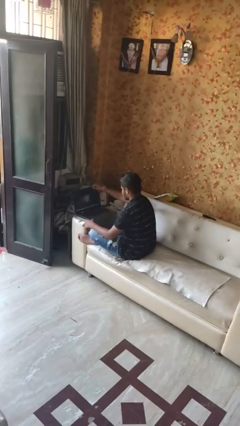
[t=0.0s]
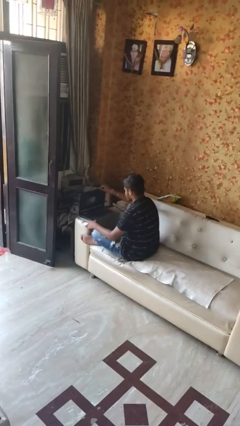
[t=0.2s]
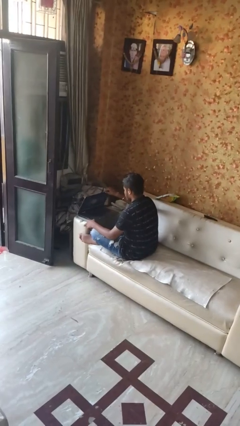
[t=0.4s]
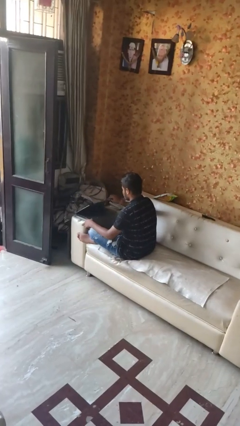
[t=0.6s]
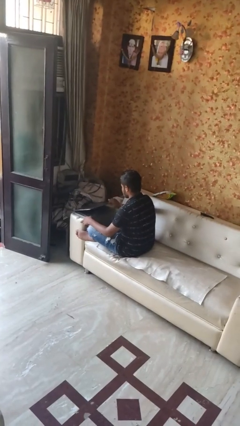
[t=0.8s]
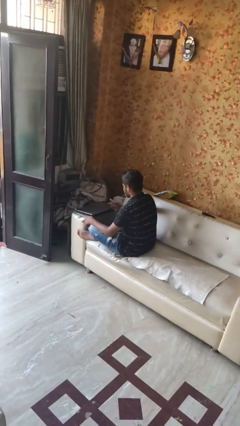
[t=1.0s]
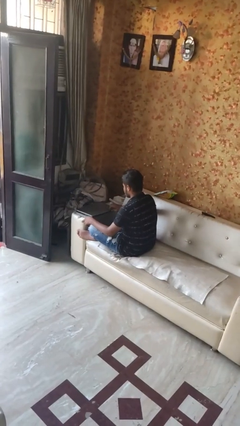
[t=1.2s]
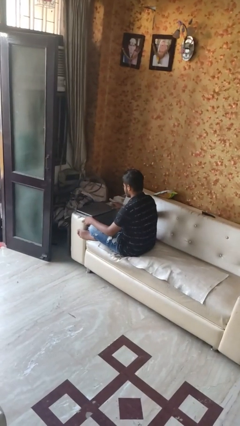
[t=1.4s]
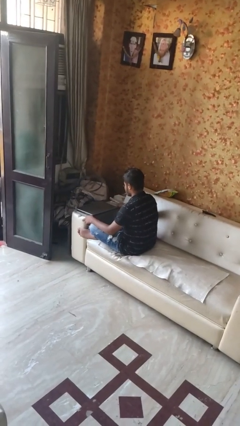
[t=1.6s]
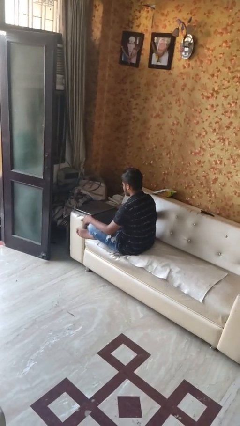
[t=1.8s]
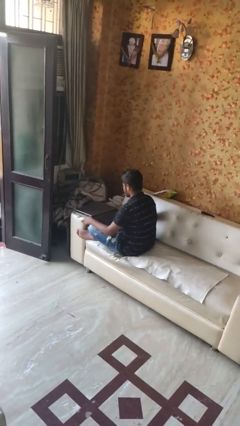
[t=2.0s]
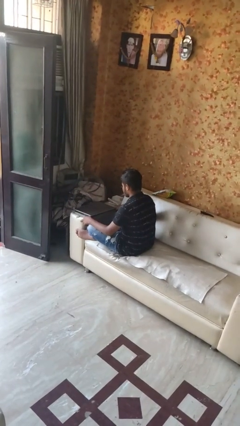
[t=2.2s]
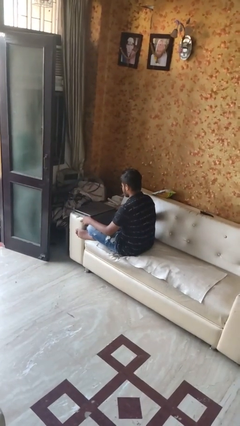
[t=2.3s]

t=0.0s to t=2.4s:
person closes laptop

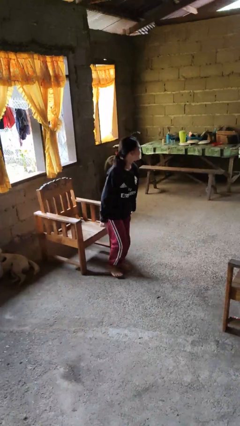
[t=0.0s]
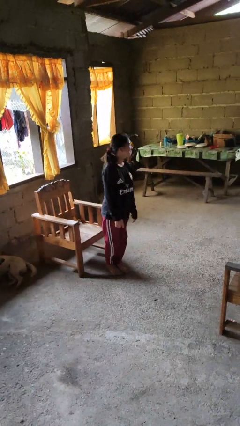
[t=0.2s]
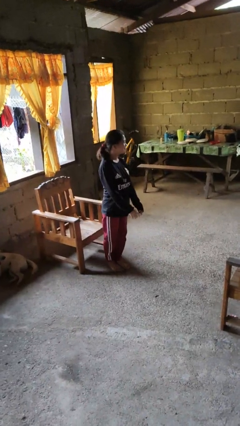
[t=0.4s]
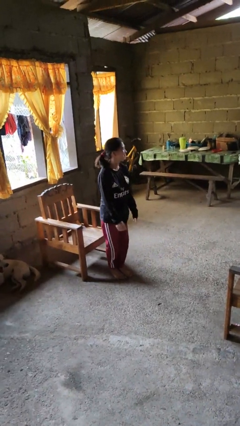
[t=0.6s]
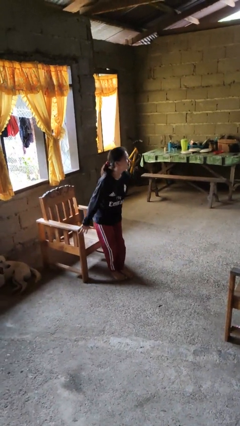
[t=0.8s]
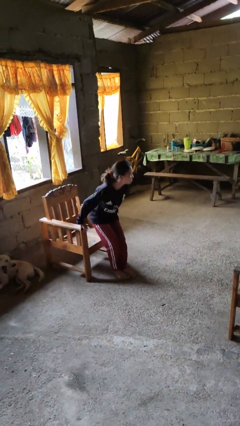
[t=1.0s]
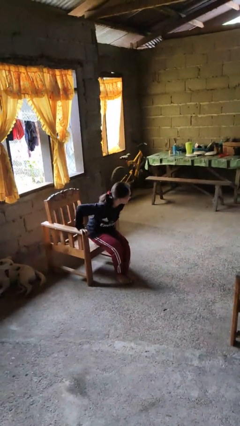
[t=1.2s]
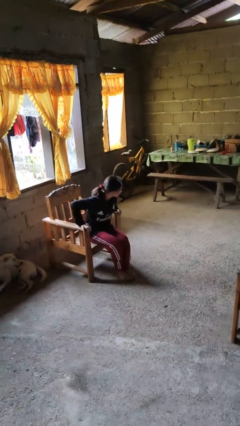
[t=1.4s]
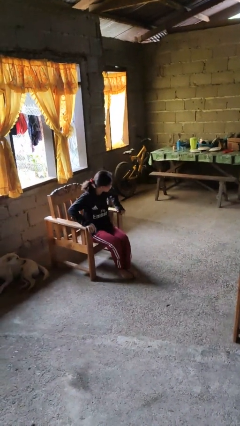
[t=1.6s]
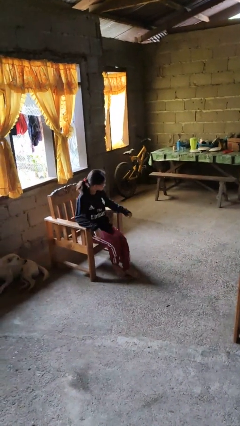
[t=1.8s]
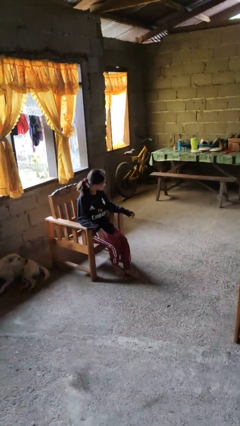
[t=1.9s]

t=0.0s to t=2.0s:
person sits down

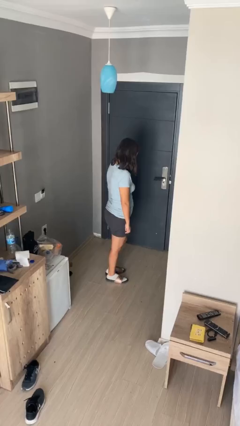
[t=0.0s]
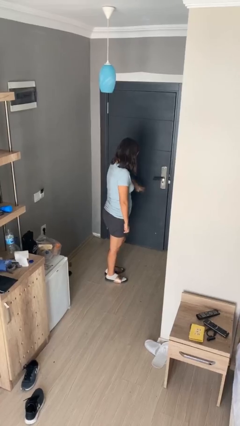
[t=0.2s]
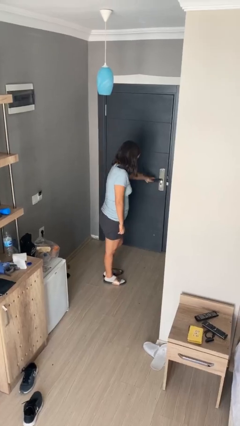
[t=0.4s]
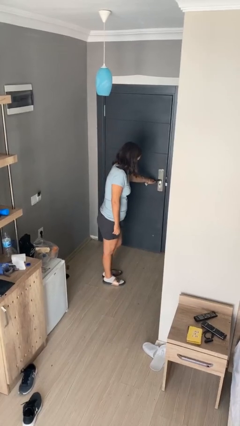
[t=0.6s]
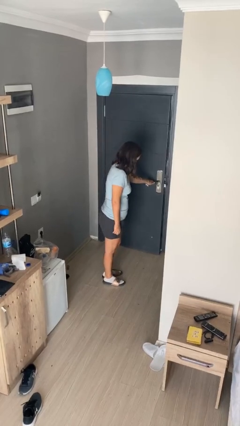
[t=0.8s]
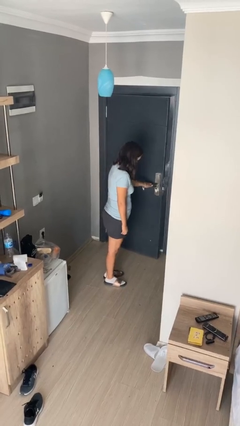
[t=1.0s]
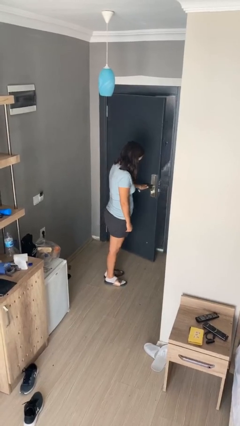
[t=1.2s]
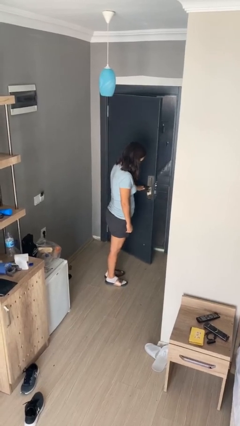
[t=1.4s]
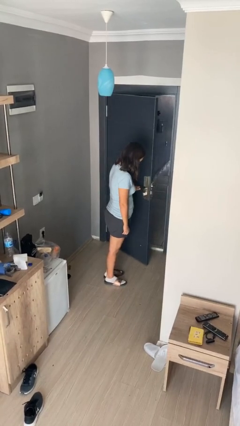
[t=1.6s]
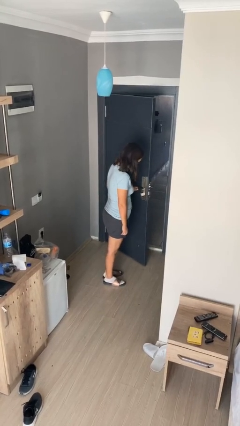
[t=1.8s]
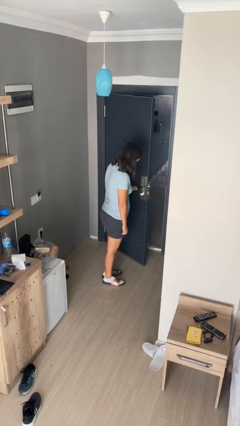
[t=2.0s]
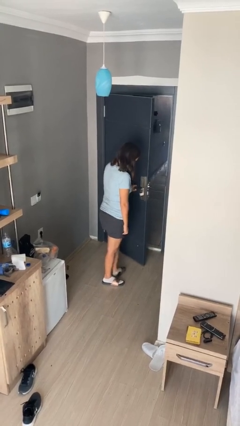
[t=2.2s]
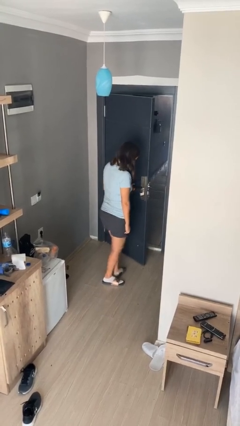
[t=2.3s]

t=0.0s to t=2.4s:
person opens facility door

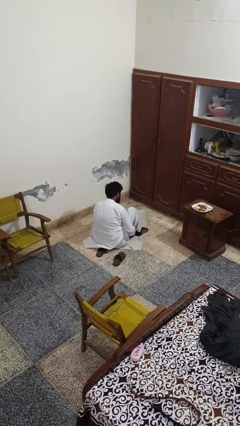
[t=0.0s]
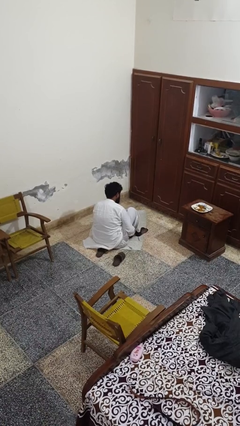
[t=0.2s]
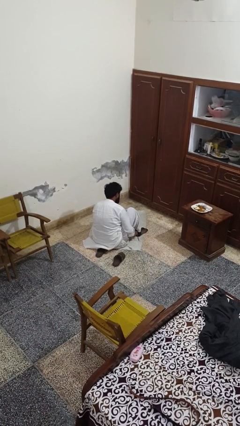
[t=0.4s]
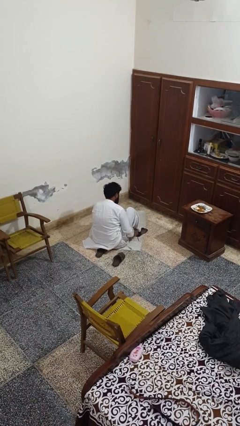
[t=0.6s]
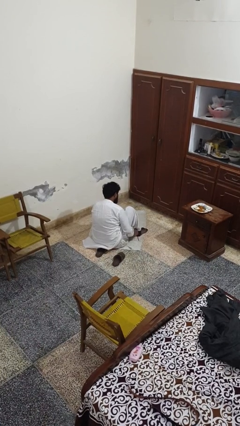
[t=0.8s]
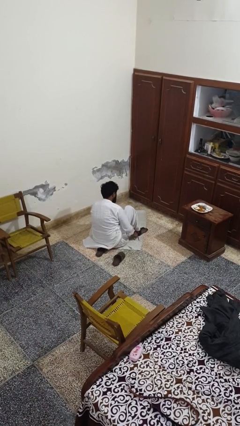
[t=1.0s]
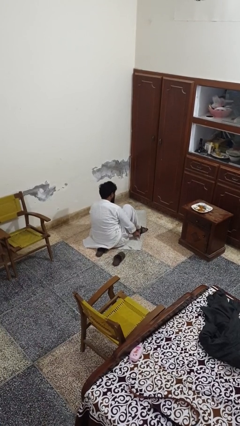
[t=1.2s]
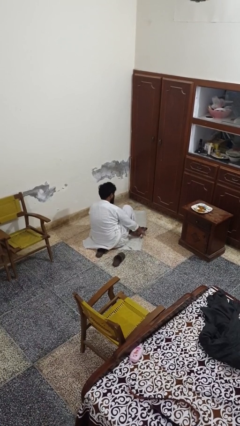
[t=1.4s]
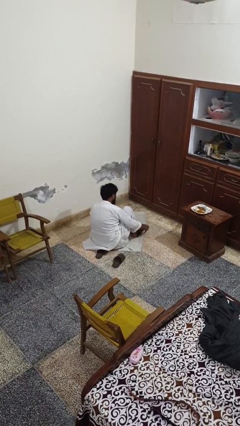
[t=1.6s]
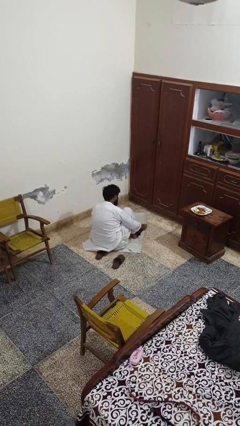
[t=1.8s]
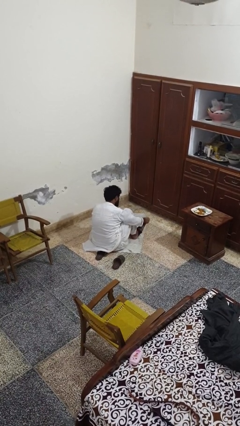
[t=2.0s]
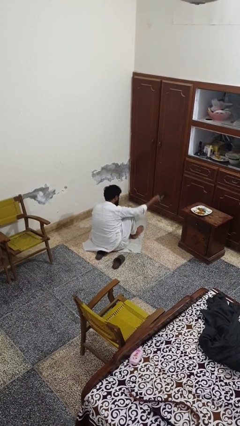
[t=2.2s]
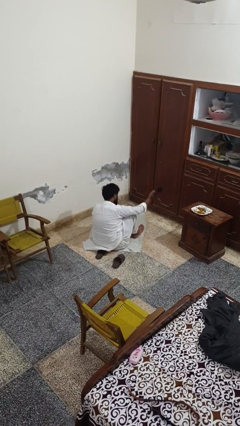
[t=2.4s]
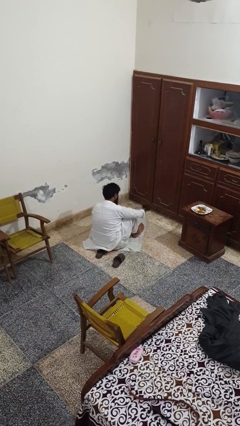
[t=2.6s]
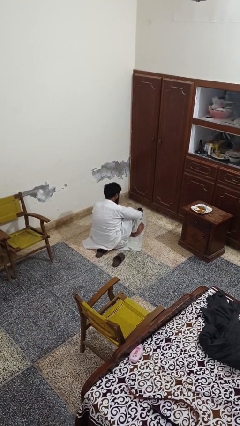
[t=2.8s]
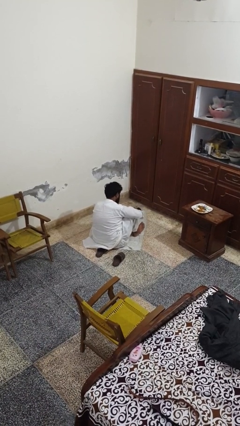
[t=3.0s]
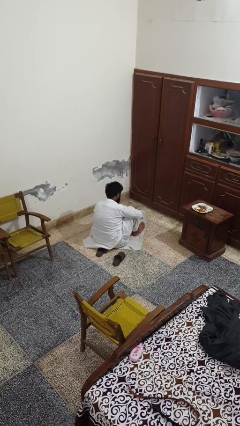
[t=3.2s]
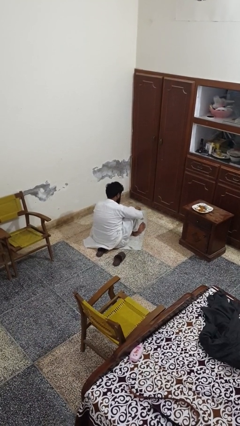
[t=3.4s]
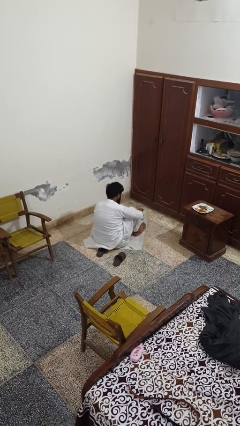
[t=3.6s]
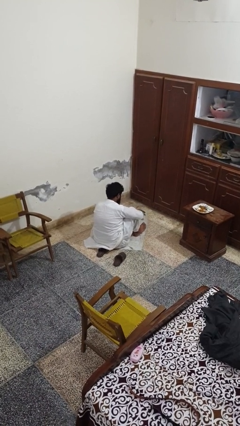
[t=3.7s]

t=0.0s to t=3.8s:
person takes off socks

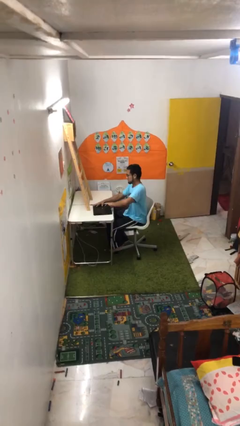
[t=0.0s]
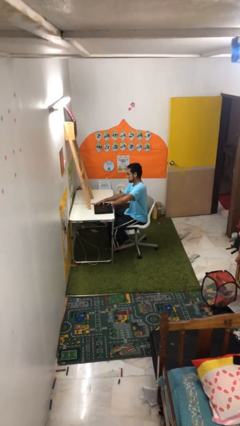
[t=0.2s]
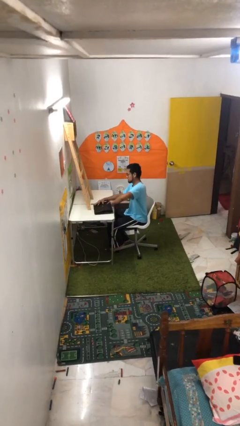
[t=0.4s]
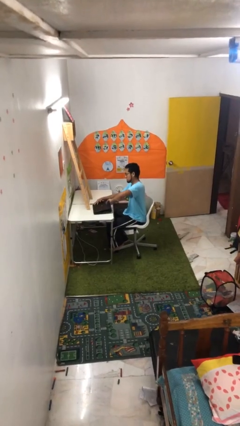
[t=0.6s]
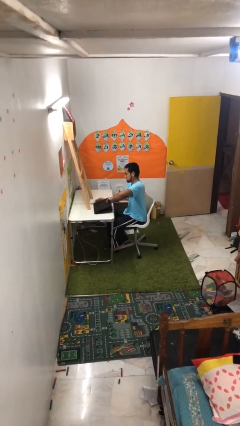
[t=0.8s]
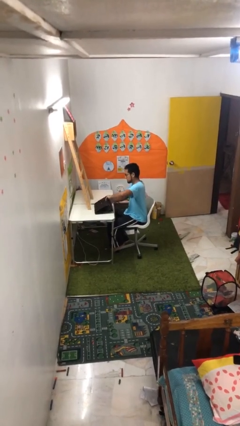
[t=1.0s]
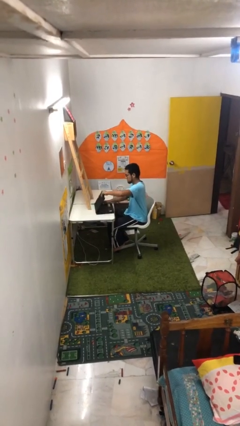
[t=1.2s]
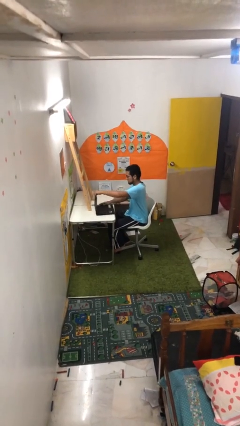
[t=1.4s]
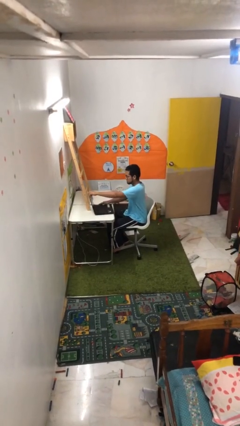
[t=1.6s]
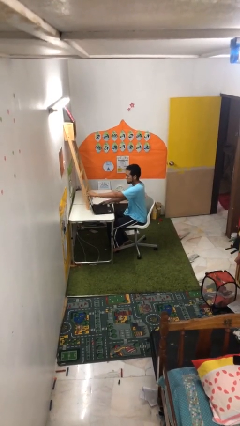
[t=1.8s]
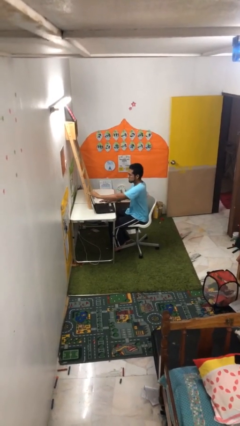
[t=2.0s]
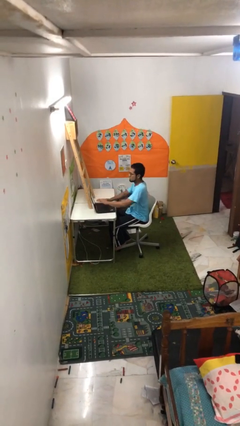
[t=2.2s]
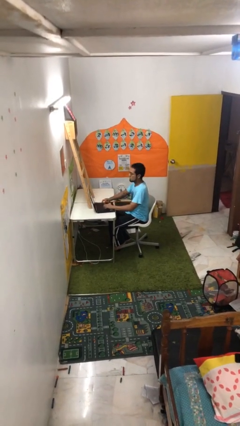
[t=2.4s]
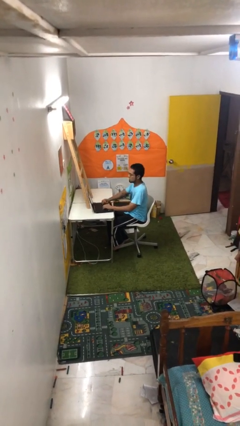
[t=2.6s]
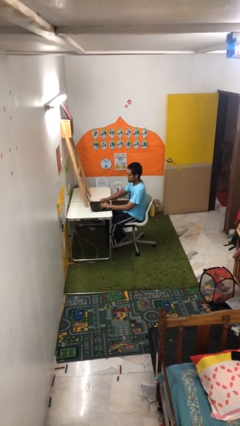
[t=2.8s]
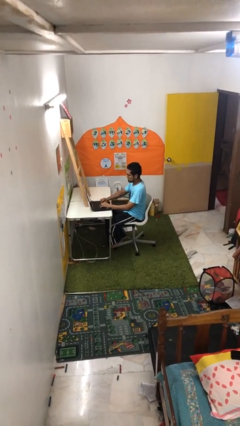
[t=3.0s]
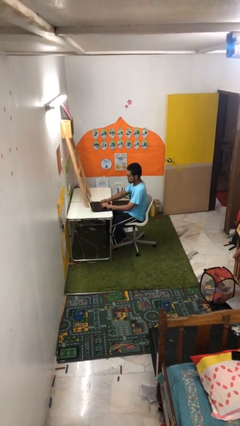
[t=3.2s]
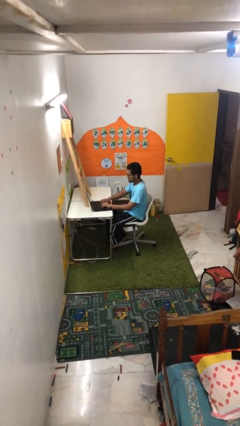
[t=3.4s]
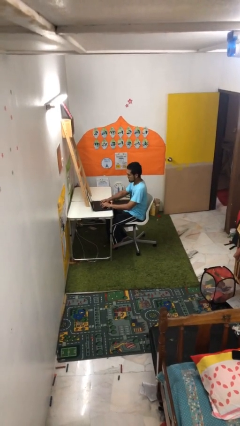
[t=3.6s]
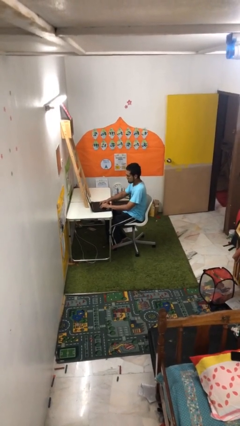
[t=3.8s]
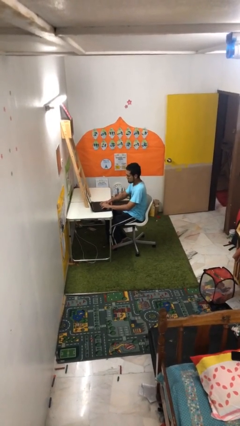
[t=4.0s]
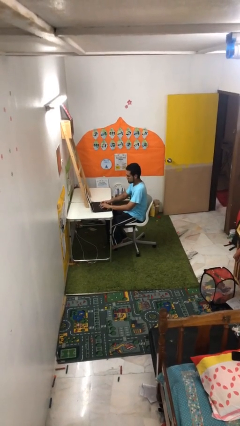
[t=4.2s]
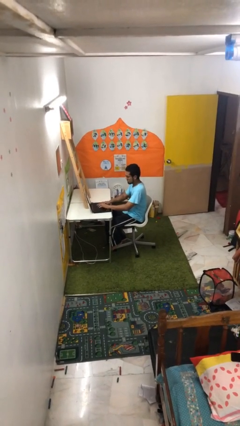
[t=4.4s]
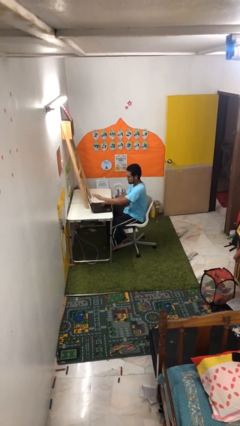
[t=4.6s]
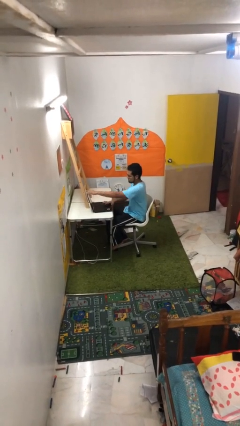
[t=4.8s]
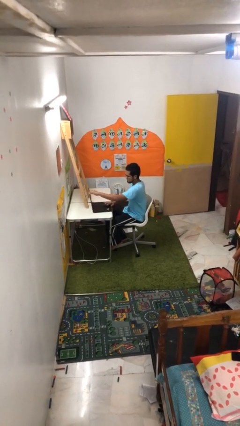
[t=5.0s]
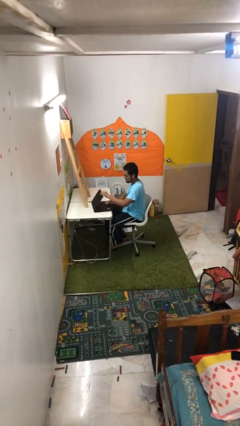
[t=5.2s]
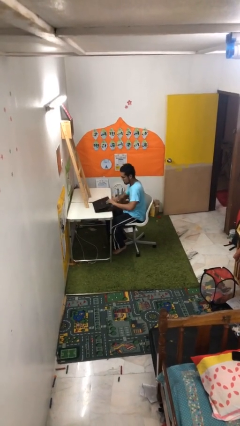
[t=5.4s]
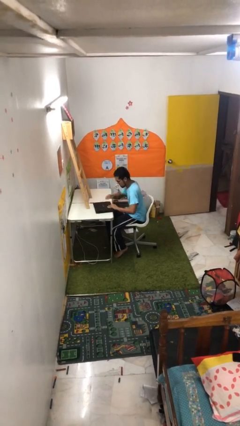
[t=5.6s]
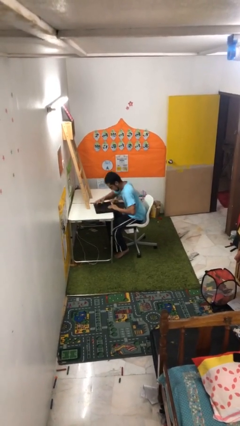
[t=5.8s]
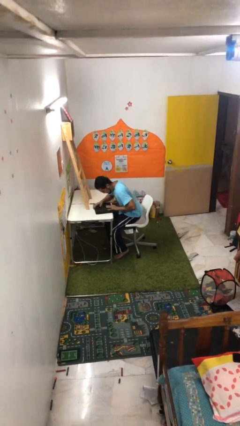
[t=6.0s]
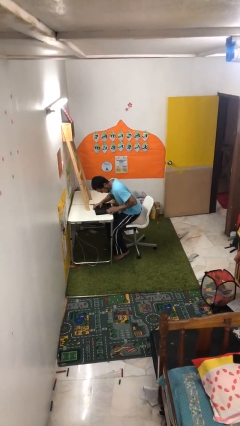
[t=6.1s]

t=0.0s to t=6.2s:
person interacts with laptop

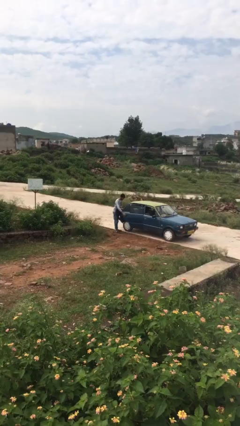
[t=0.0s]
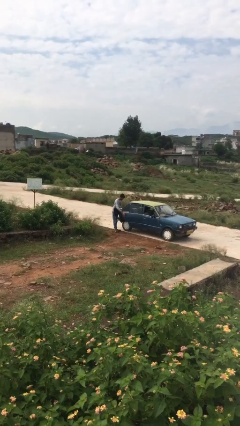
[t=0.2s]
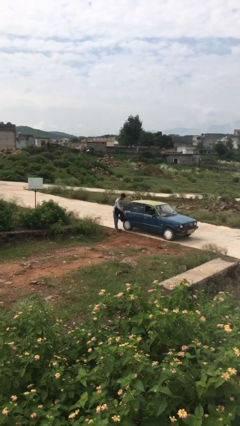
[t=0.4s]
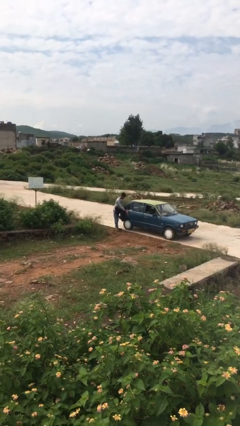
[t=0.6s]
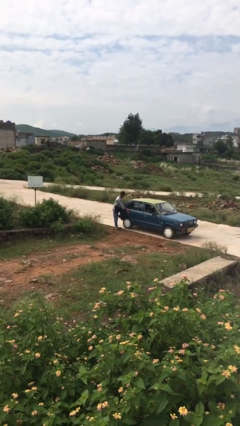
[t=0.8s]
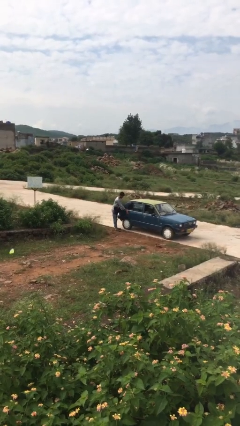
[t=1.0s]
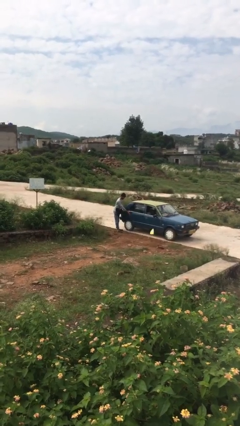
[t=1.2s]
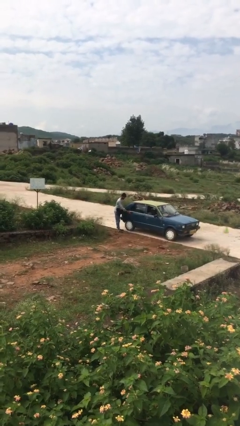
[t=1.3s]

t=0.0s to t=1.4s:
person closes car door
